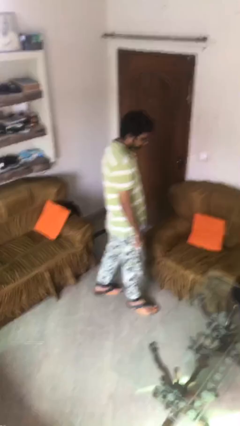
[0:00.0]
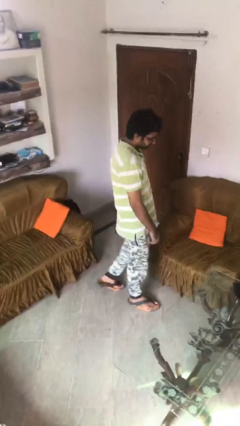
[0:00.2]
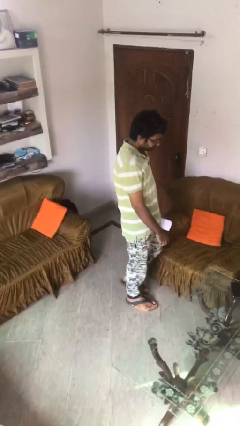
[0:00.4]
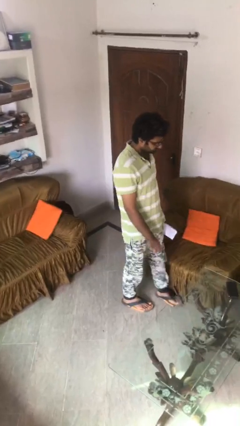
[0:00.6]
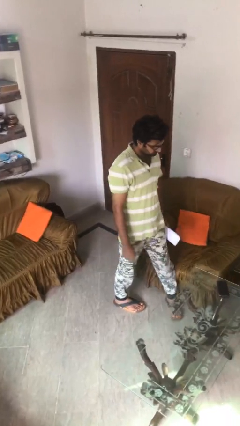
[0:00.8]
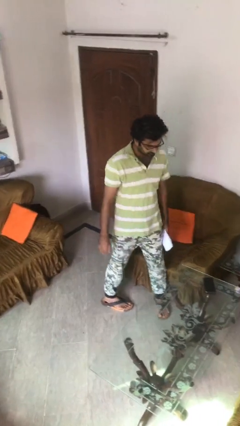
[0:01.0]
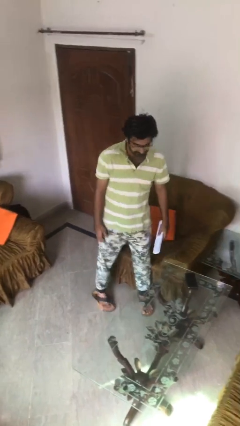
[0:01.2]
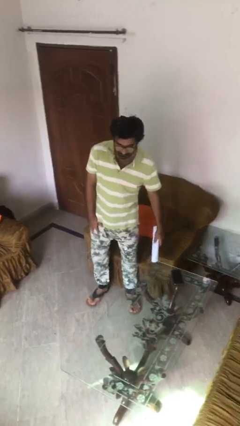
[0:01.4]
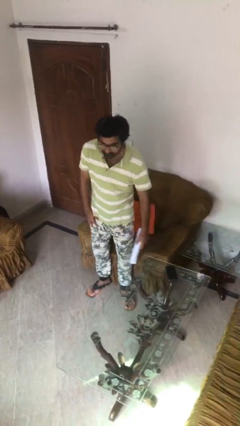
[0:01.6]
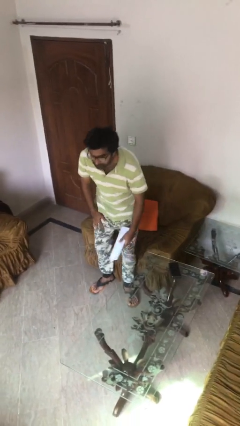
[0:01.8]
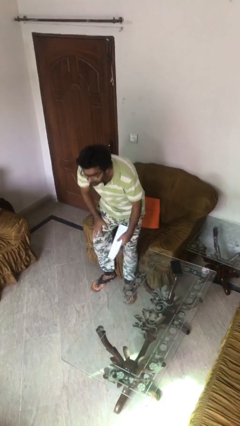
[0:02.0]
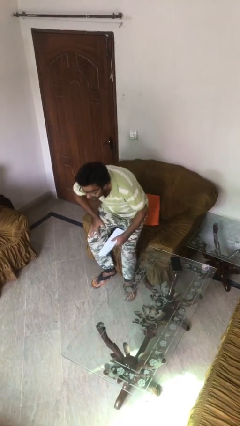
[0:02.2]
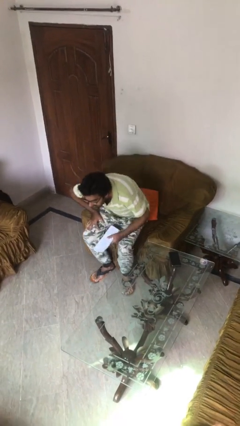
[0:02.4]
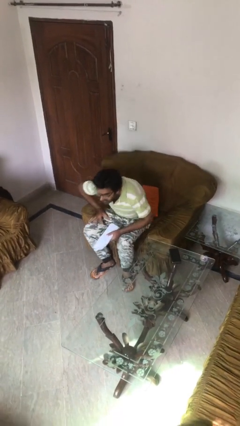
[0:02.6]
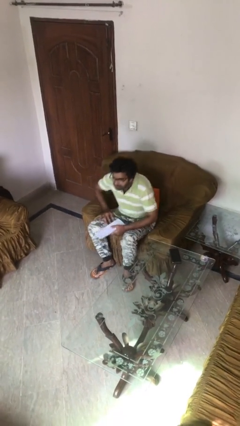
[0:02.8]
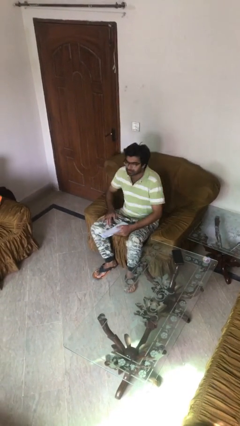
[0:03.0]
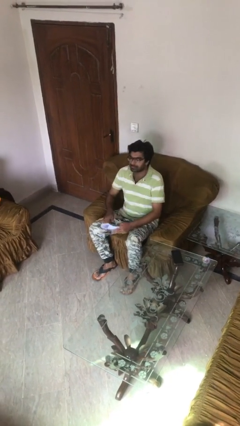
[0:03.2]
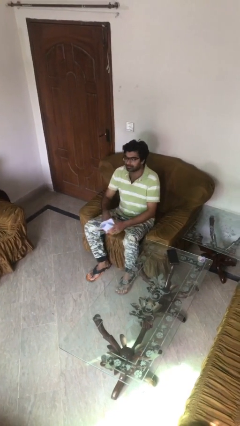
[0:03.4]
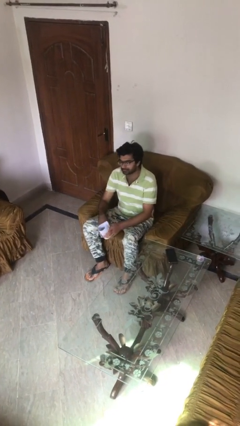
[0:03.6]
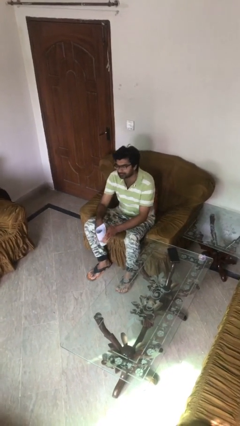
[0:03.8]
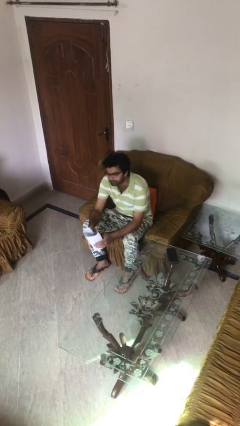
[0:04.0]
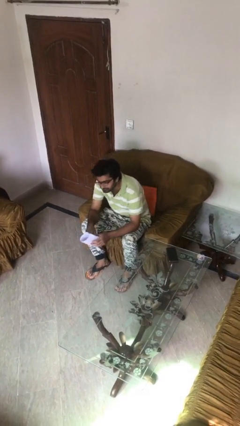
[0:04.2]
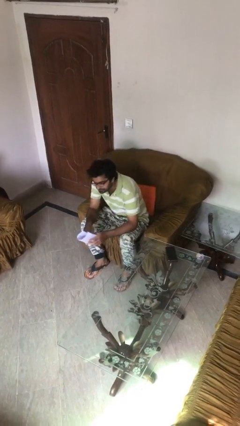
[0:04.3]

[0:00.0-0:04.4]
person sits down

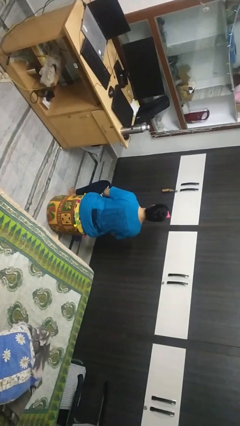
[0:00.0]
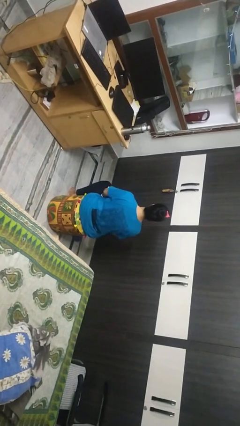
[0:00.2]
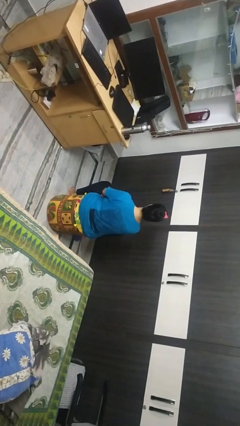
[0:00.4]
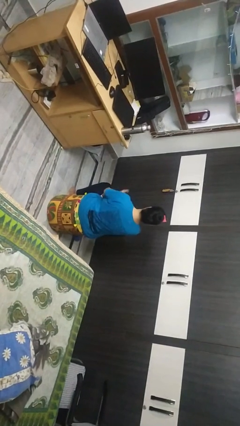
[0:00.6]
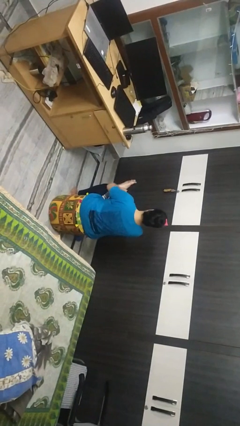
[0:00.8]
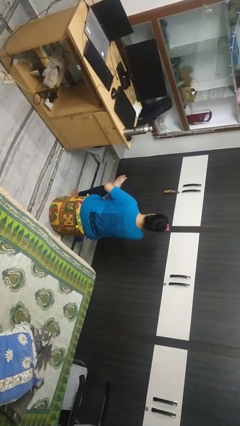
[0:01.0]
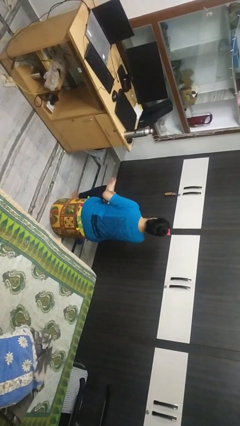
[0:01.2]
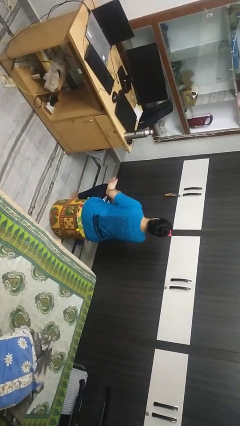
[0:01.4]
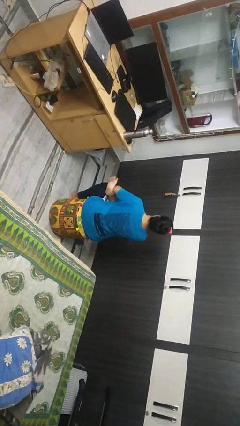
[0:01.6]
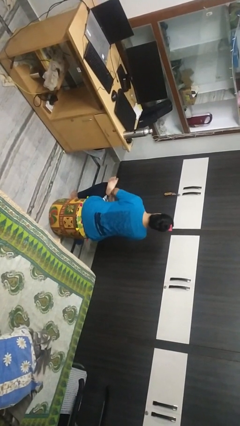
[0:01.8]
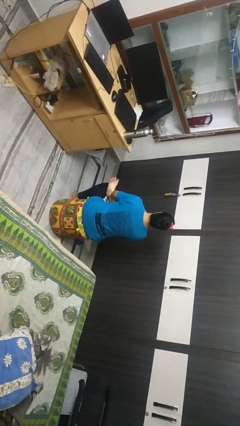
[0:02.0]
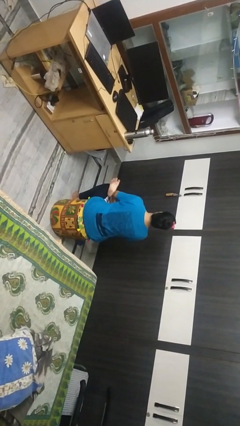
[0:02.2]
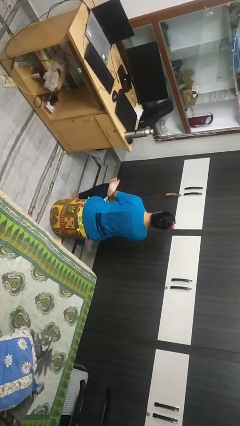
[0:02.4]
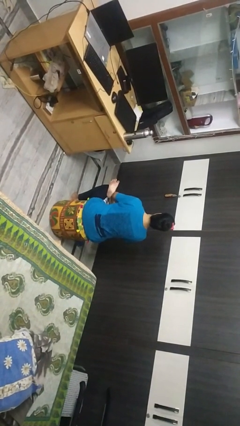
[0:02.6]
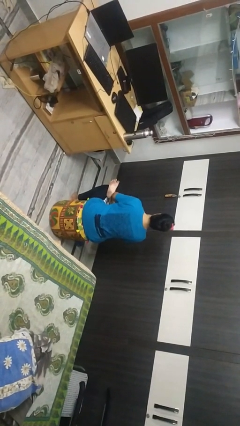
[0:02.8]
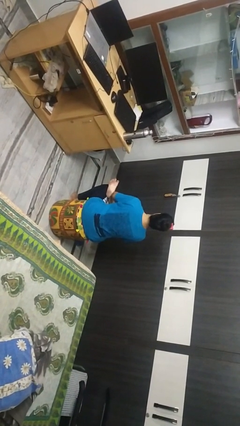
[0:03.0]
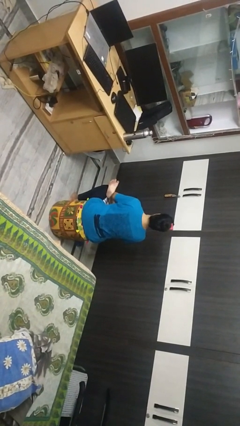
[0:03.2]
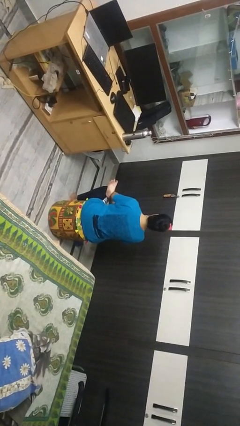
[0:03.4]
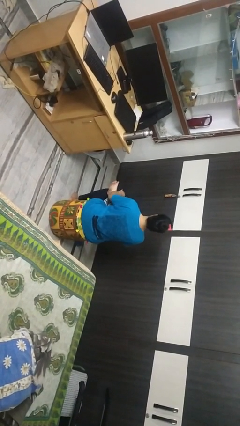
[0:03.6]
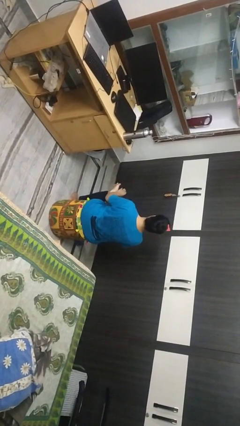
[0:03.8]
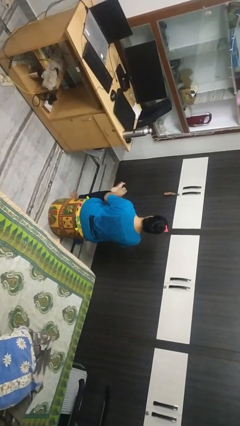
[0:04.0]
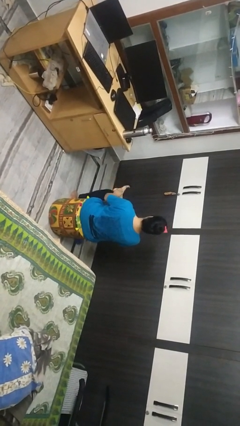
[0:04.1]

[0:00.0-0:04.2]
person crosses legs

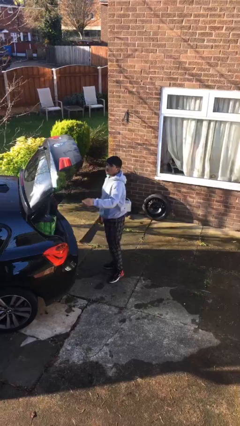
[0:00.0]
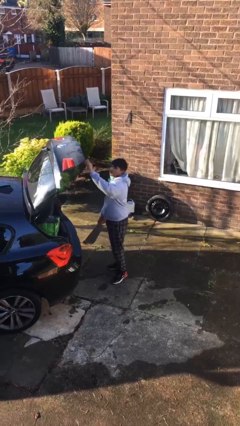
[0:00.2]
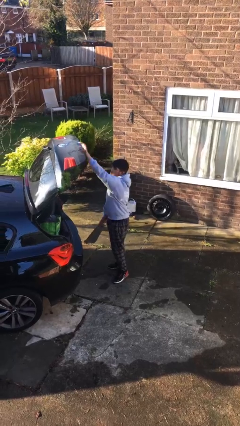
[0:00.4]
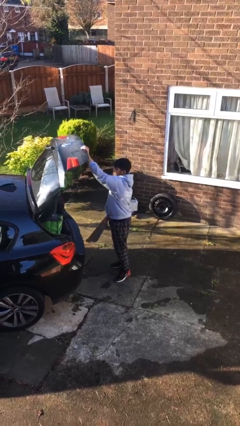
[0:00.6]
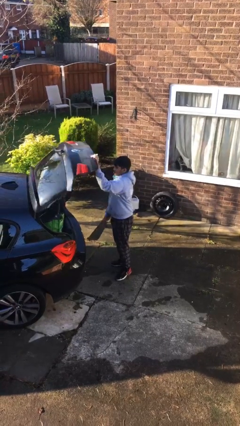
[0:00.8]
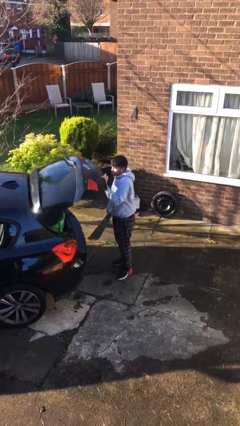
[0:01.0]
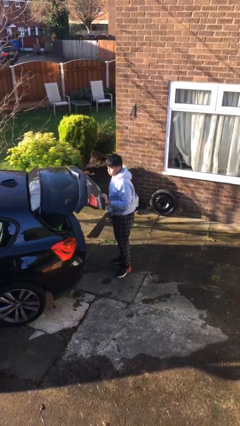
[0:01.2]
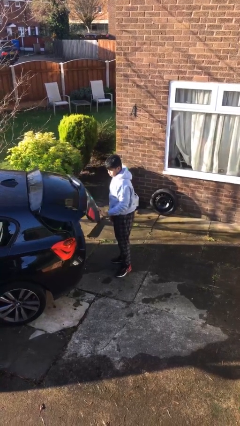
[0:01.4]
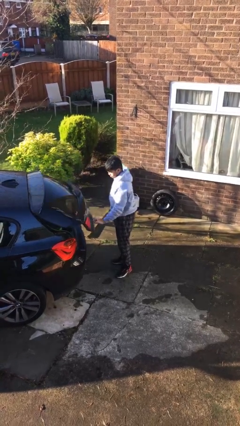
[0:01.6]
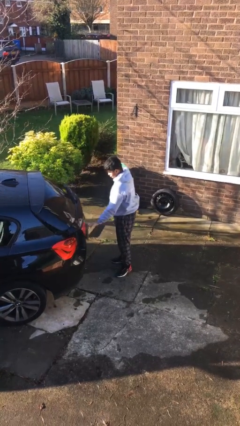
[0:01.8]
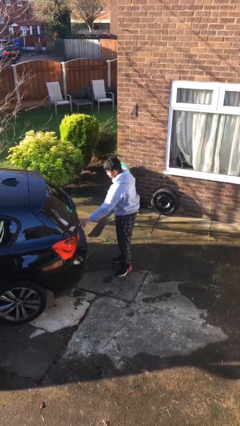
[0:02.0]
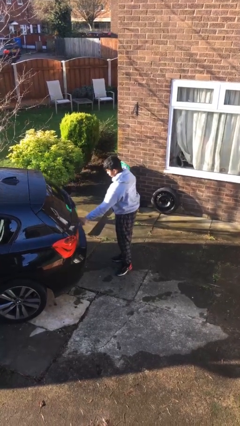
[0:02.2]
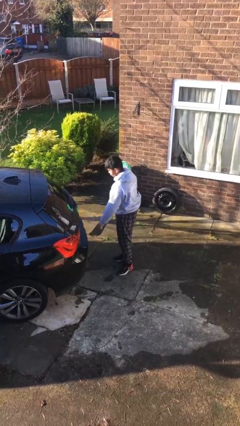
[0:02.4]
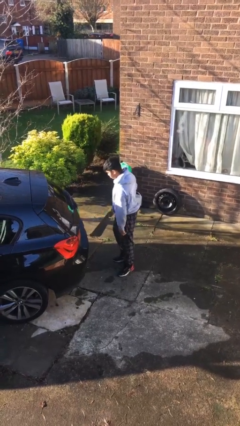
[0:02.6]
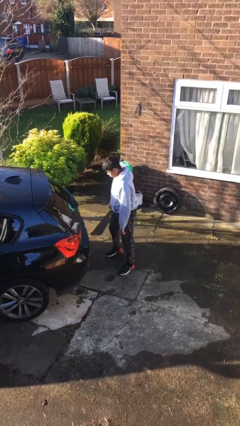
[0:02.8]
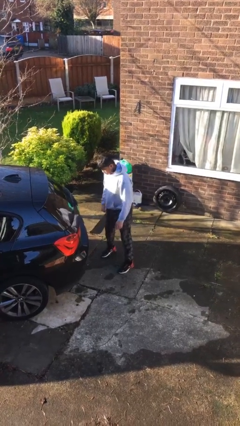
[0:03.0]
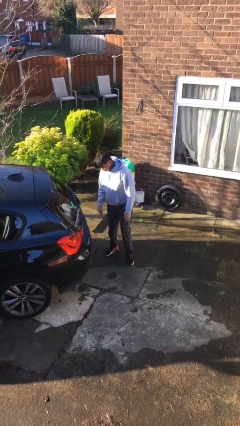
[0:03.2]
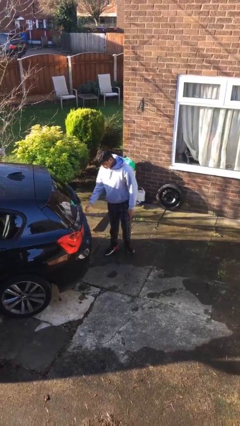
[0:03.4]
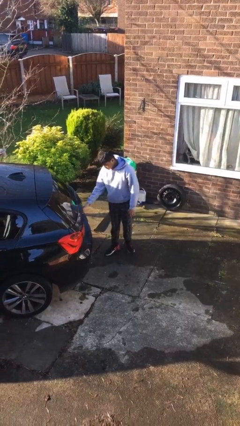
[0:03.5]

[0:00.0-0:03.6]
person closes car trunk

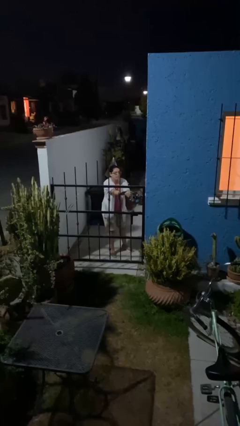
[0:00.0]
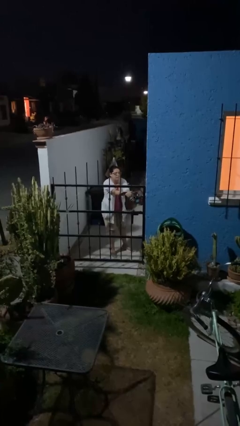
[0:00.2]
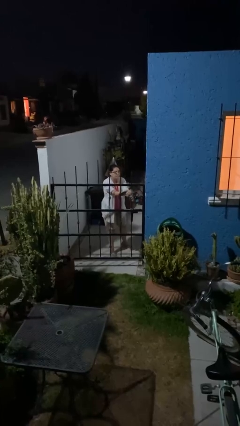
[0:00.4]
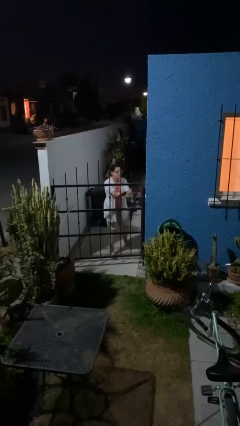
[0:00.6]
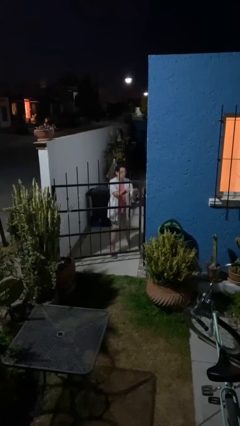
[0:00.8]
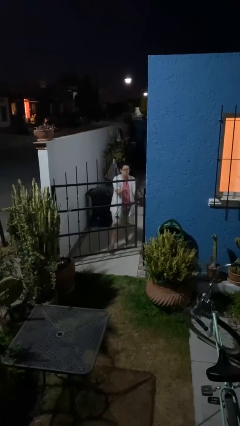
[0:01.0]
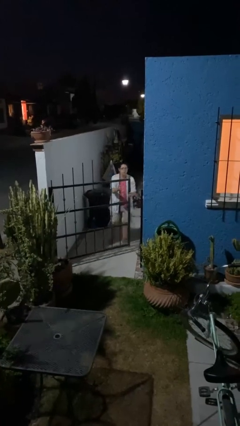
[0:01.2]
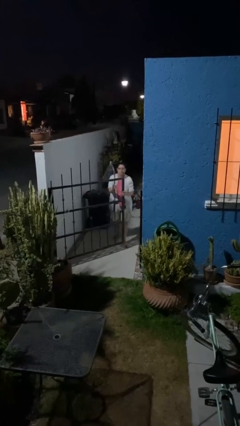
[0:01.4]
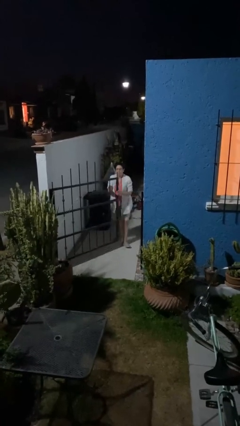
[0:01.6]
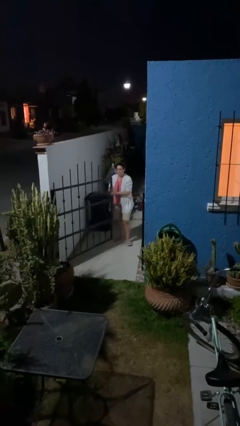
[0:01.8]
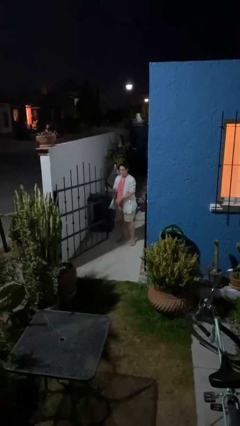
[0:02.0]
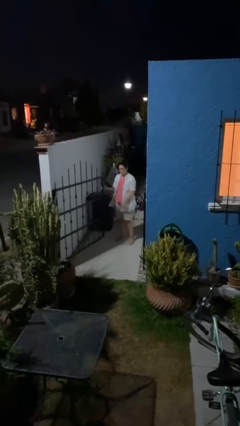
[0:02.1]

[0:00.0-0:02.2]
person opens facility door

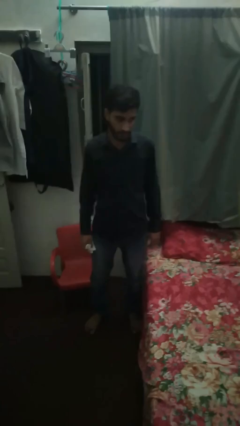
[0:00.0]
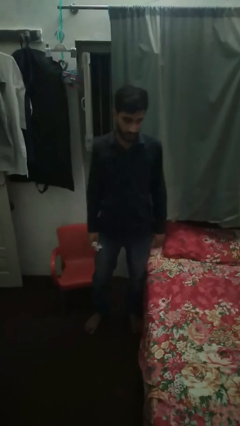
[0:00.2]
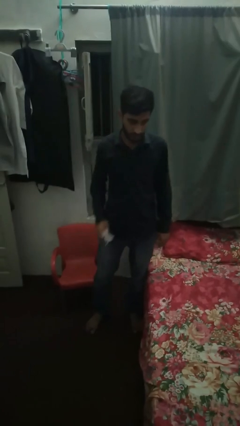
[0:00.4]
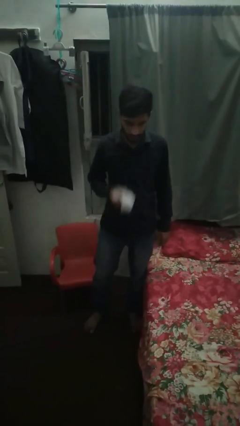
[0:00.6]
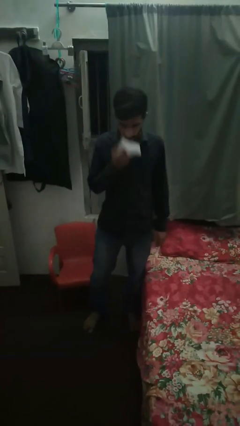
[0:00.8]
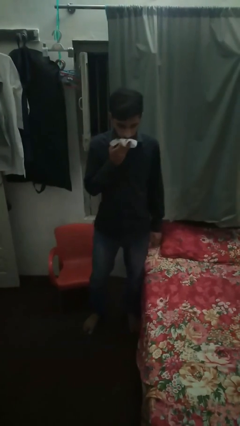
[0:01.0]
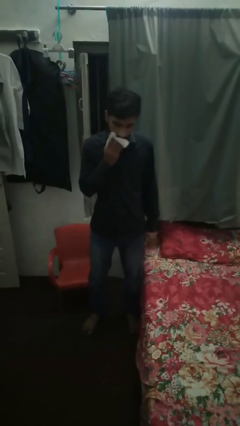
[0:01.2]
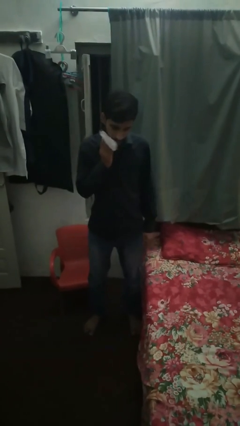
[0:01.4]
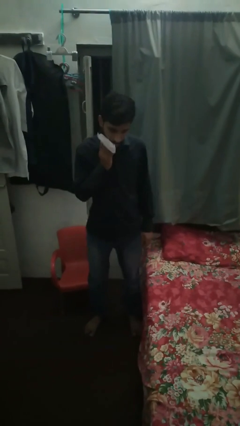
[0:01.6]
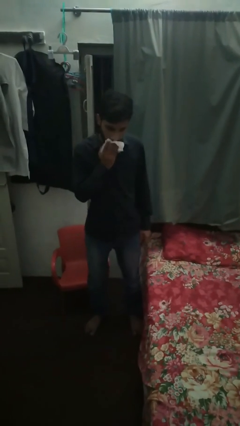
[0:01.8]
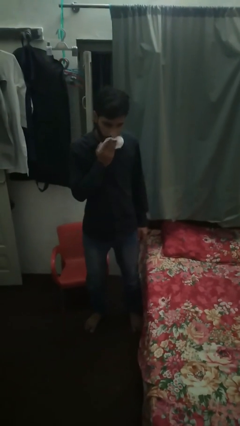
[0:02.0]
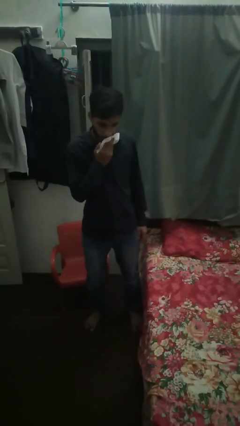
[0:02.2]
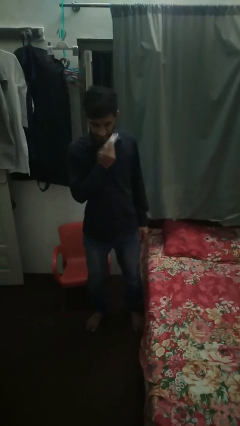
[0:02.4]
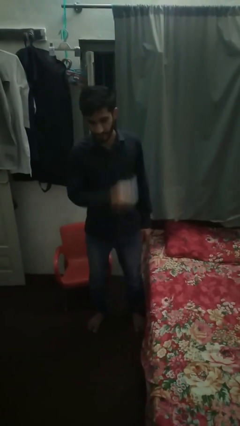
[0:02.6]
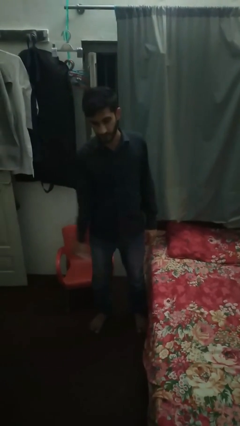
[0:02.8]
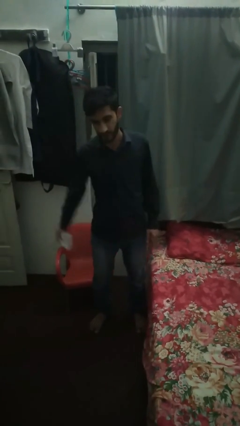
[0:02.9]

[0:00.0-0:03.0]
person wipes mouth with napkin

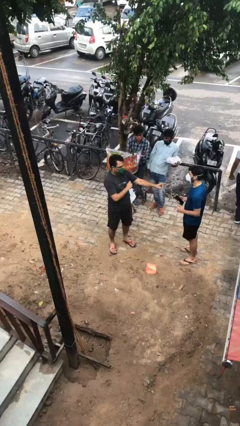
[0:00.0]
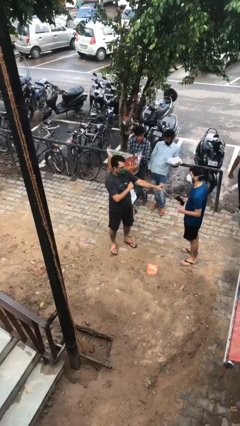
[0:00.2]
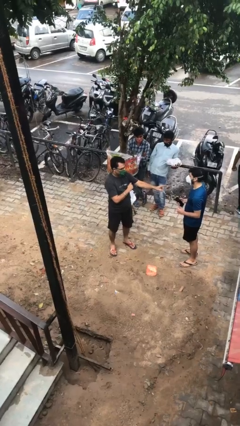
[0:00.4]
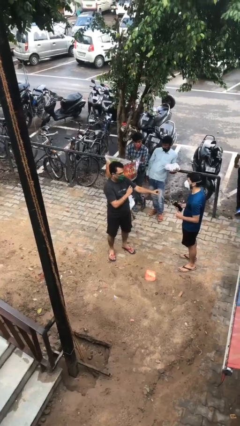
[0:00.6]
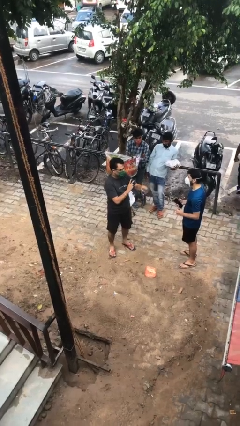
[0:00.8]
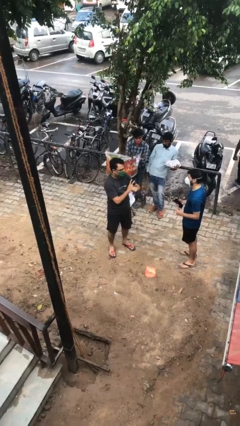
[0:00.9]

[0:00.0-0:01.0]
person points at person
